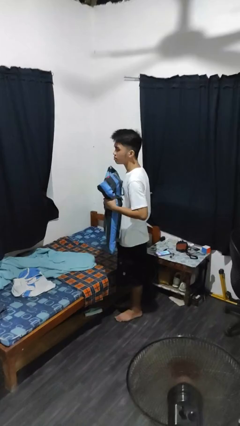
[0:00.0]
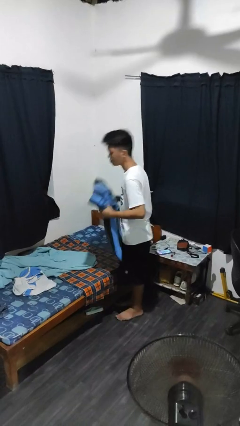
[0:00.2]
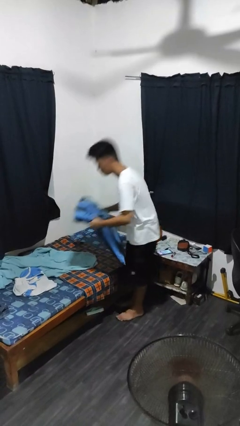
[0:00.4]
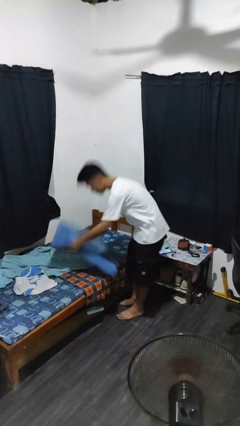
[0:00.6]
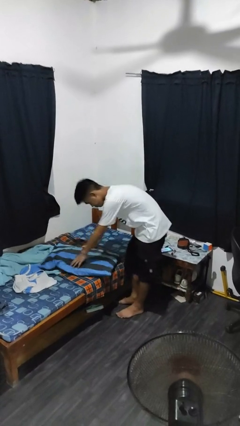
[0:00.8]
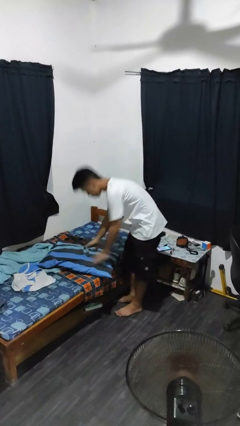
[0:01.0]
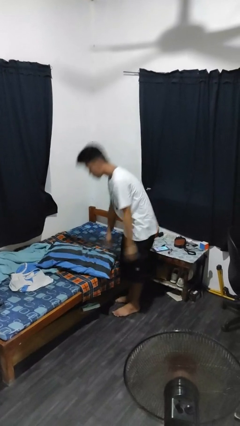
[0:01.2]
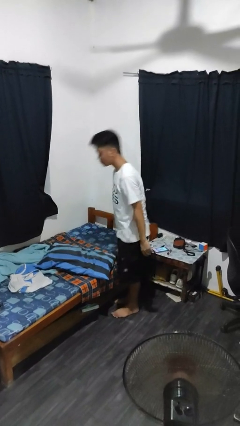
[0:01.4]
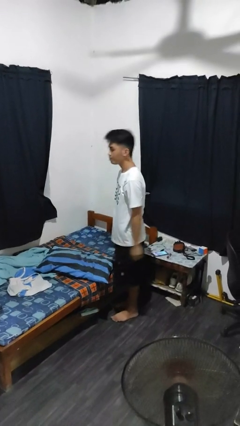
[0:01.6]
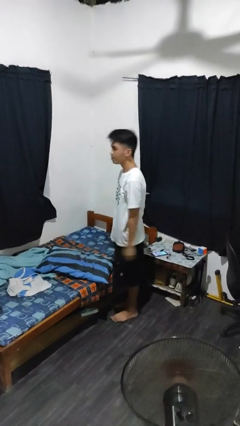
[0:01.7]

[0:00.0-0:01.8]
person puts down object on bed

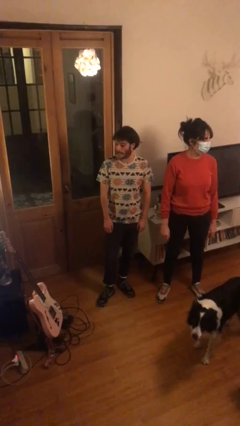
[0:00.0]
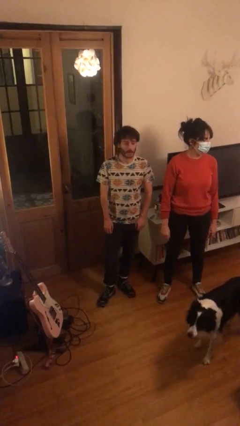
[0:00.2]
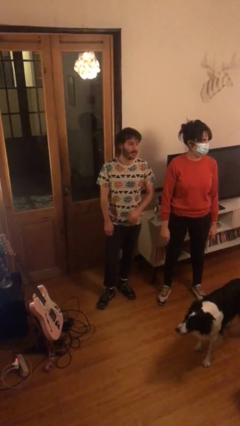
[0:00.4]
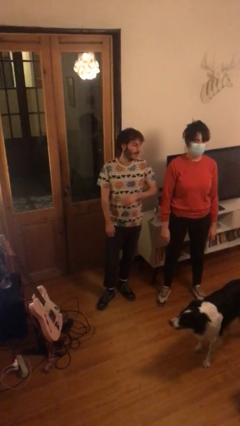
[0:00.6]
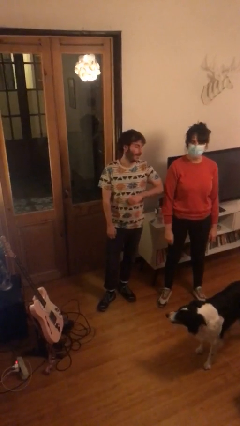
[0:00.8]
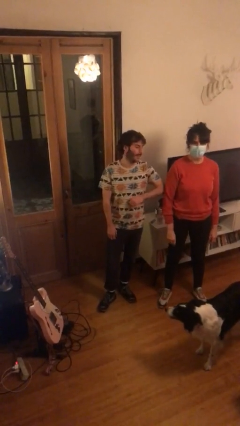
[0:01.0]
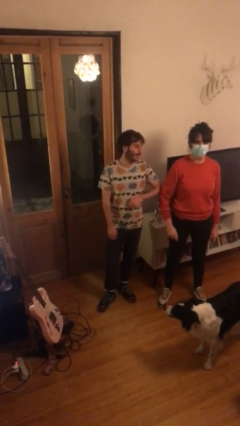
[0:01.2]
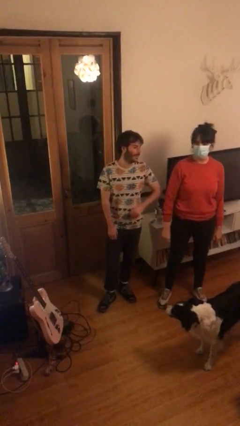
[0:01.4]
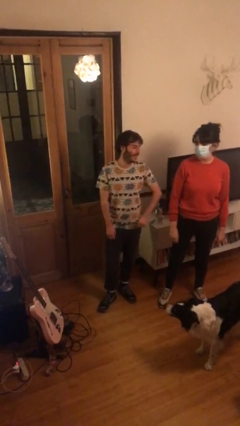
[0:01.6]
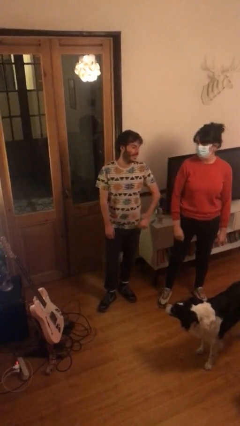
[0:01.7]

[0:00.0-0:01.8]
person nudges person with elbow

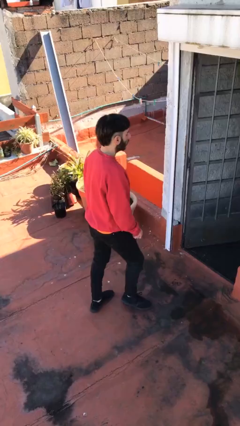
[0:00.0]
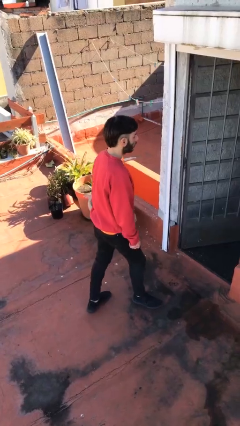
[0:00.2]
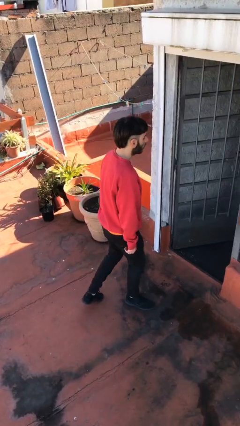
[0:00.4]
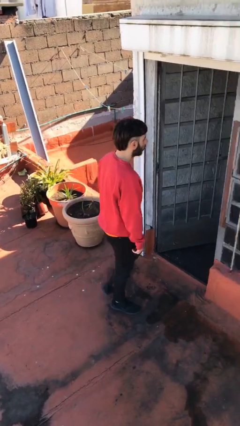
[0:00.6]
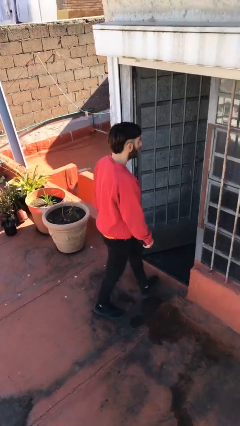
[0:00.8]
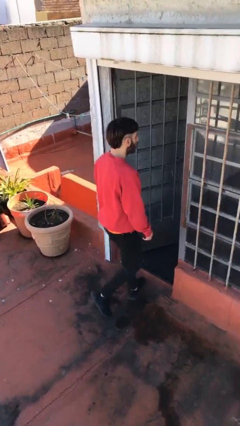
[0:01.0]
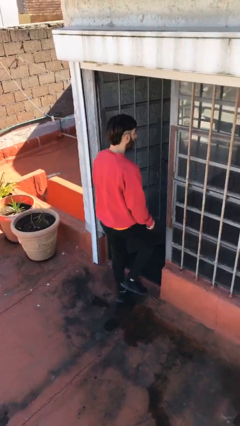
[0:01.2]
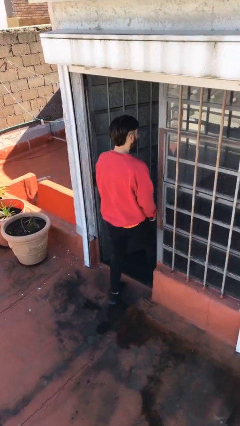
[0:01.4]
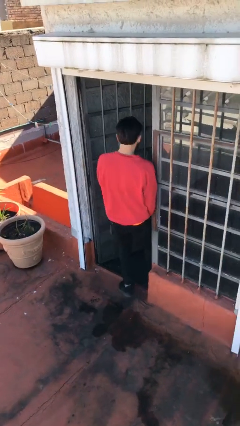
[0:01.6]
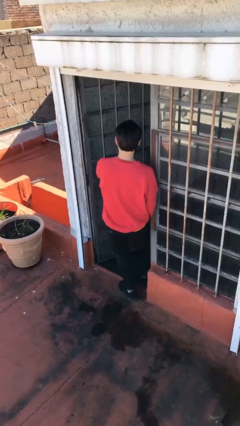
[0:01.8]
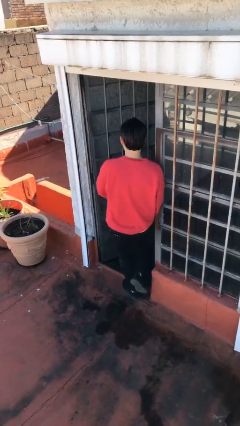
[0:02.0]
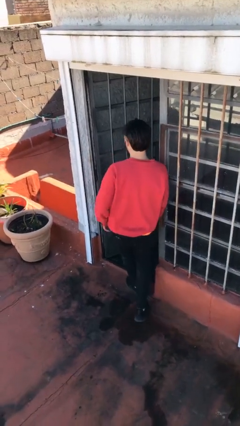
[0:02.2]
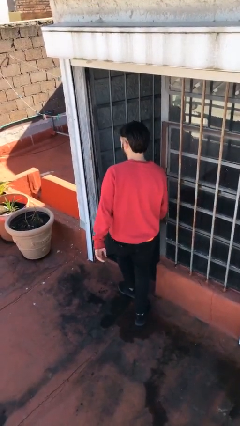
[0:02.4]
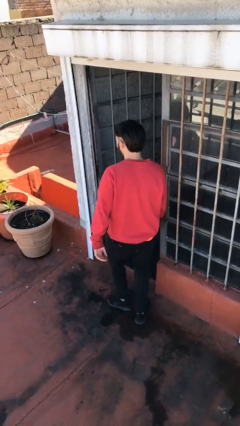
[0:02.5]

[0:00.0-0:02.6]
person bumps into wall

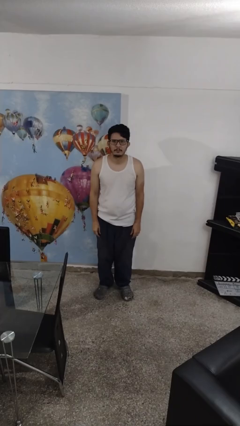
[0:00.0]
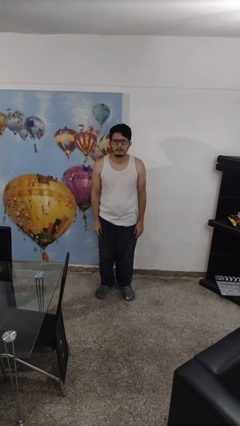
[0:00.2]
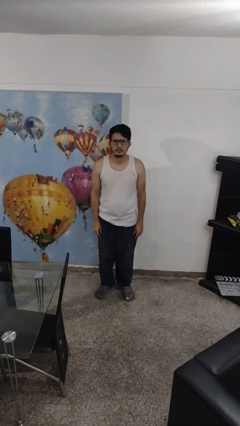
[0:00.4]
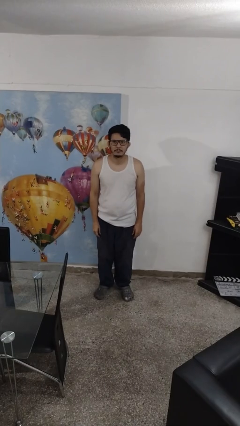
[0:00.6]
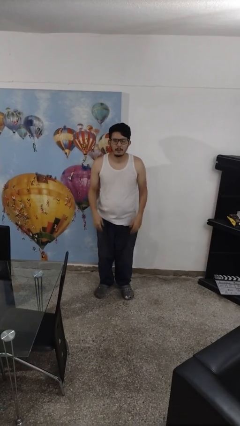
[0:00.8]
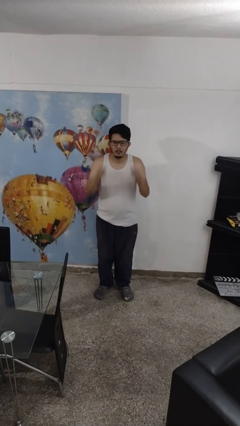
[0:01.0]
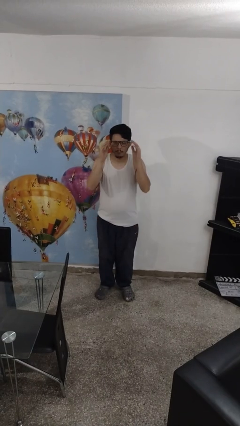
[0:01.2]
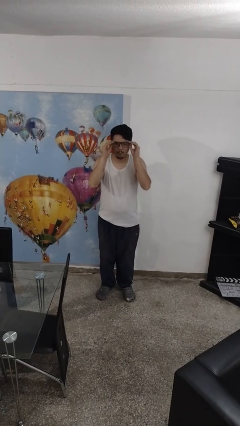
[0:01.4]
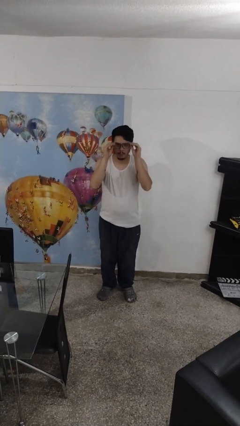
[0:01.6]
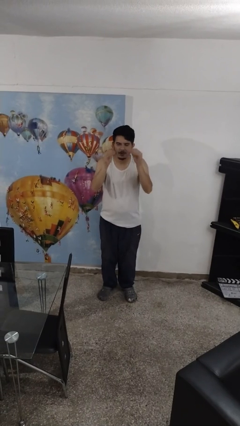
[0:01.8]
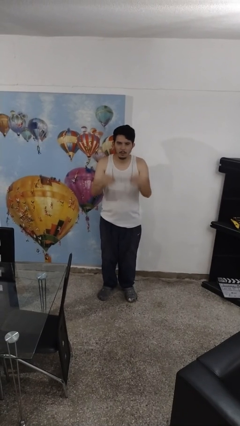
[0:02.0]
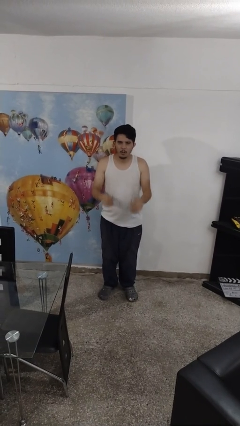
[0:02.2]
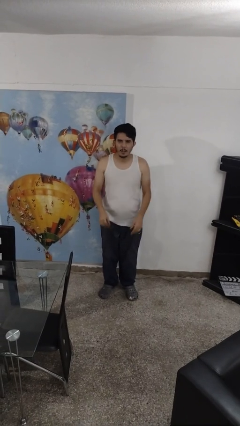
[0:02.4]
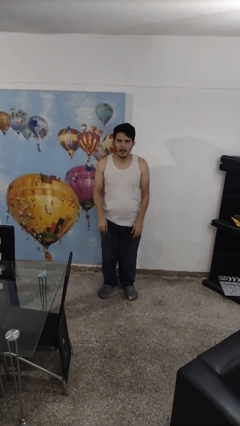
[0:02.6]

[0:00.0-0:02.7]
person takes off glasses

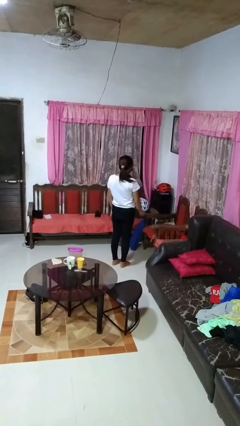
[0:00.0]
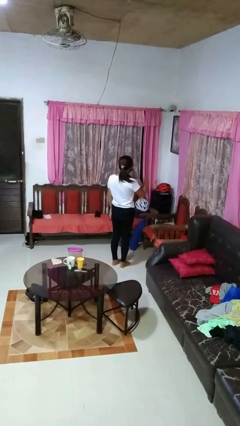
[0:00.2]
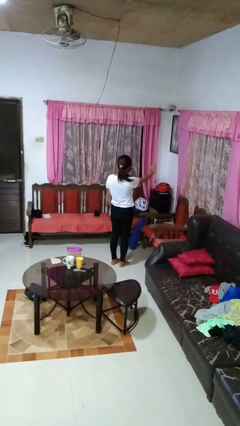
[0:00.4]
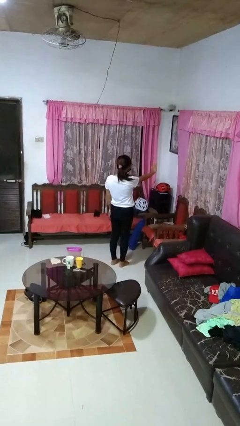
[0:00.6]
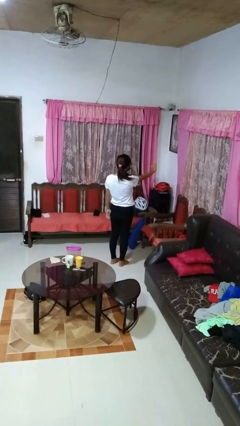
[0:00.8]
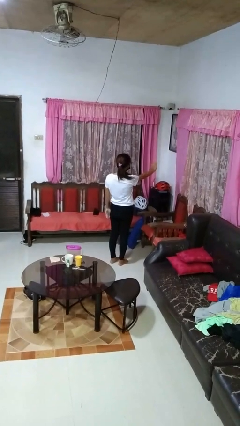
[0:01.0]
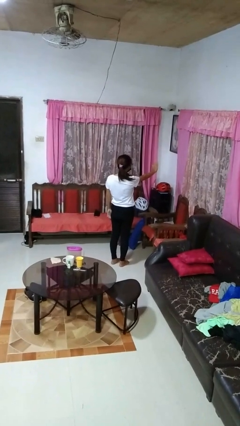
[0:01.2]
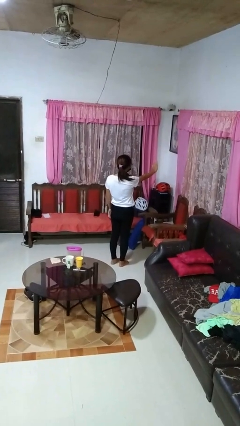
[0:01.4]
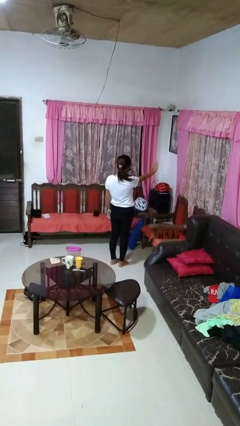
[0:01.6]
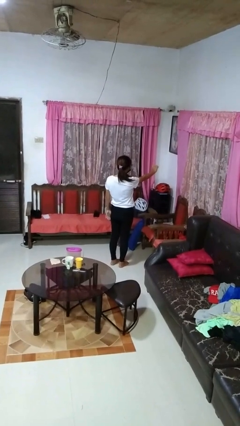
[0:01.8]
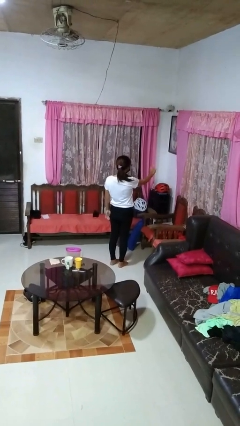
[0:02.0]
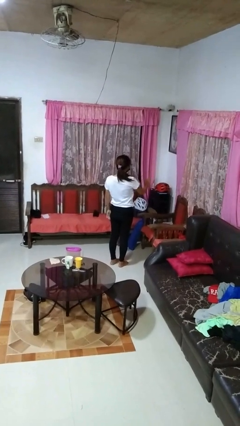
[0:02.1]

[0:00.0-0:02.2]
person gestures stop

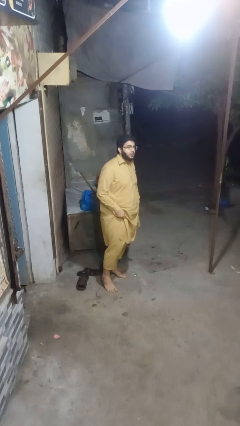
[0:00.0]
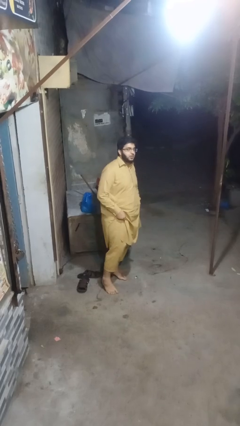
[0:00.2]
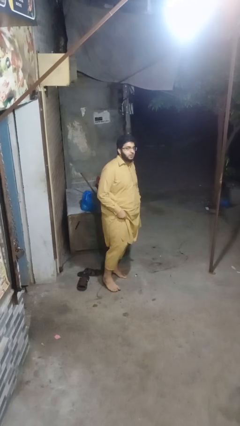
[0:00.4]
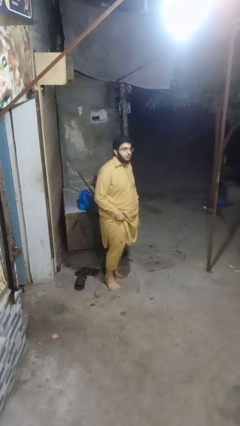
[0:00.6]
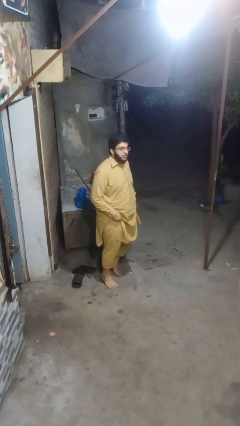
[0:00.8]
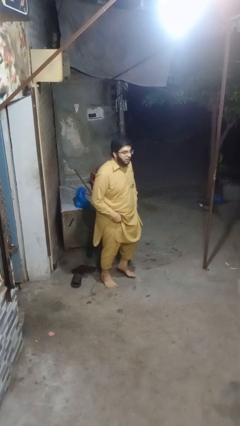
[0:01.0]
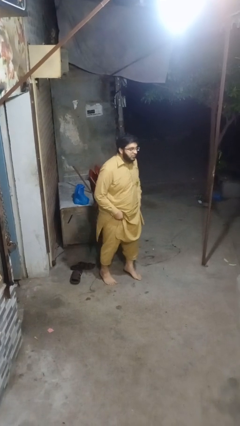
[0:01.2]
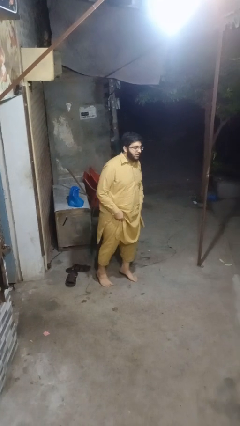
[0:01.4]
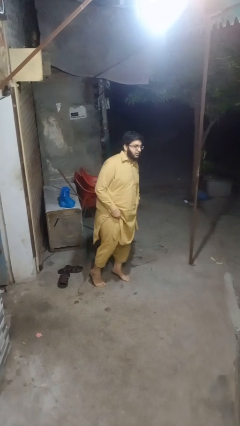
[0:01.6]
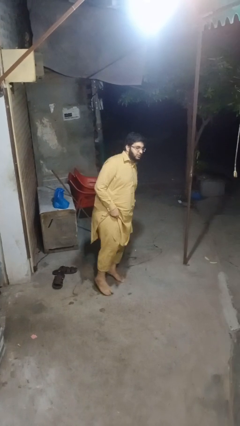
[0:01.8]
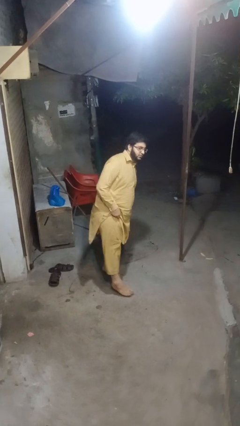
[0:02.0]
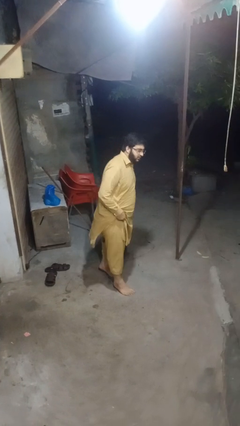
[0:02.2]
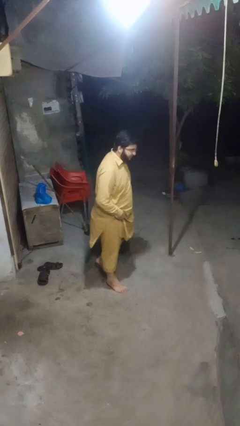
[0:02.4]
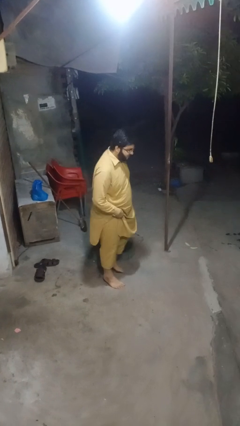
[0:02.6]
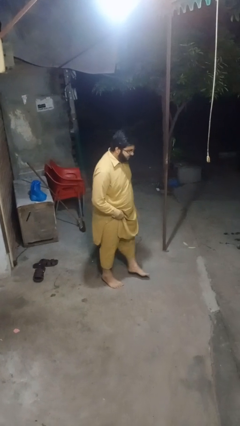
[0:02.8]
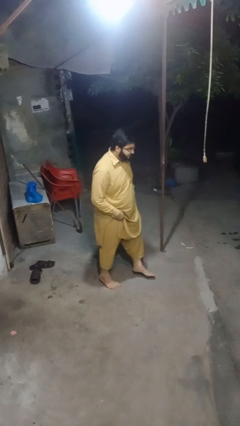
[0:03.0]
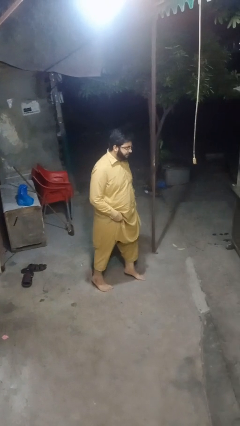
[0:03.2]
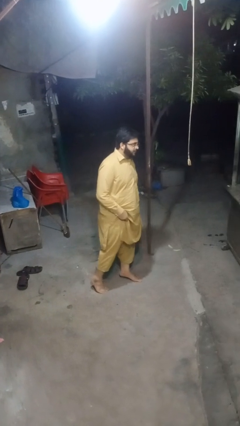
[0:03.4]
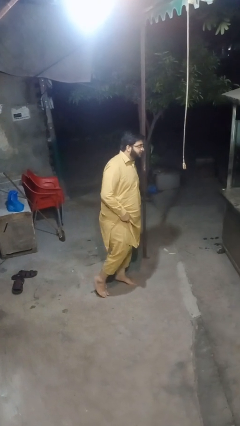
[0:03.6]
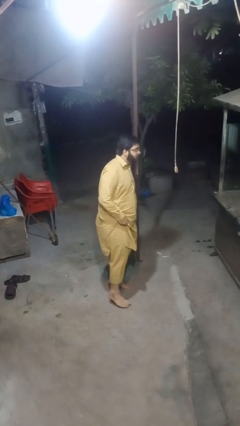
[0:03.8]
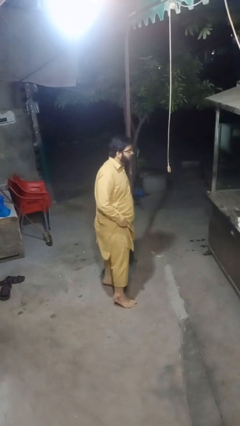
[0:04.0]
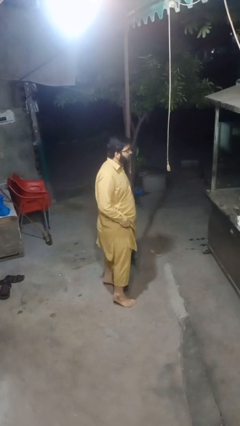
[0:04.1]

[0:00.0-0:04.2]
person walks tiptoe

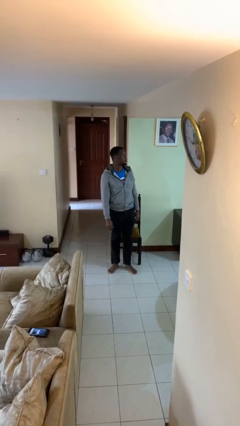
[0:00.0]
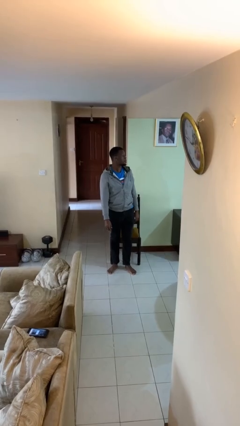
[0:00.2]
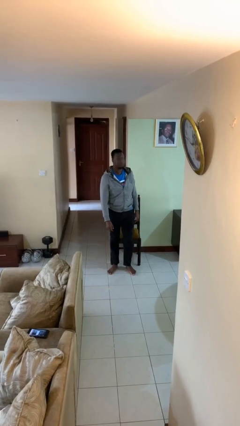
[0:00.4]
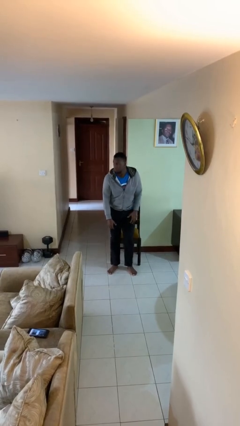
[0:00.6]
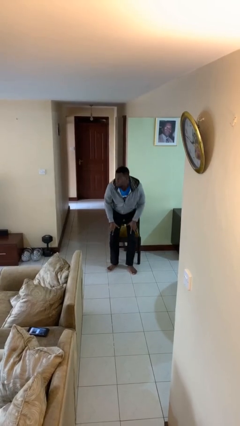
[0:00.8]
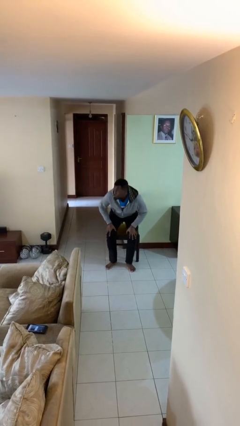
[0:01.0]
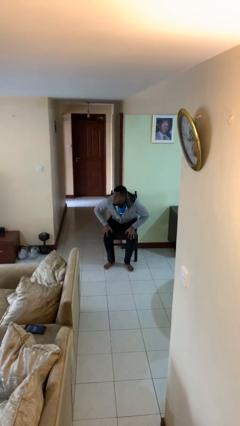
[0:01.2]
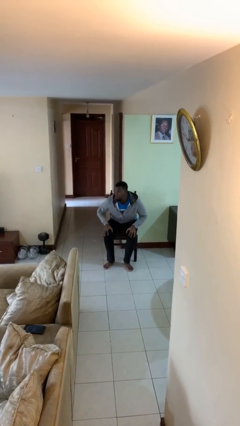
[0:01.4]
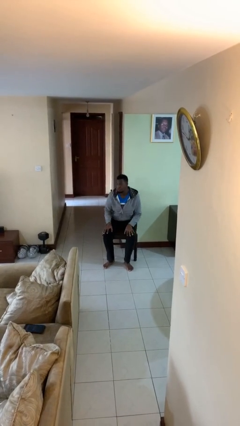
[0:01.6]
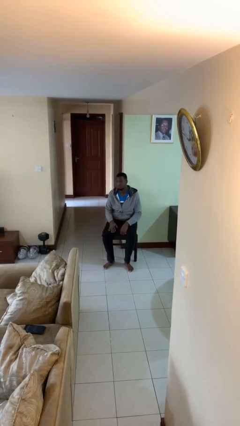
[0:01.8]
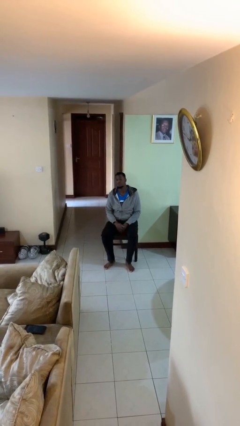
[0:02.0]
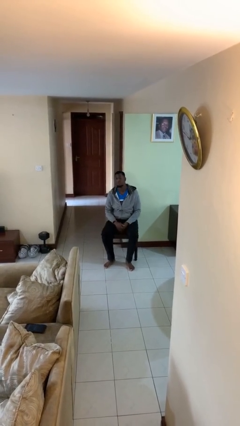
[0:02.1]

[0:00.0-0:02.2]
person sits down
